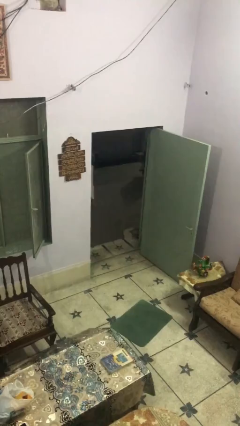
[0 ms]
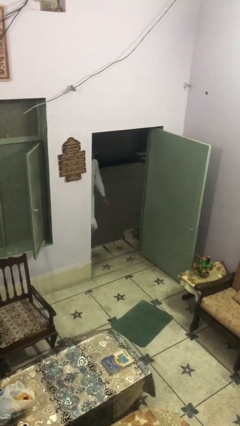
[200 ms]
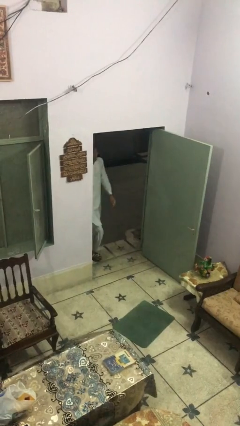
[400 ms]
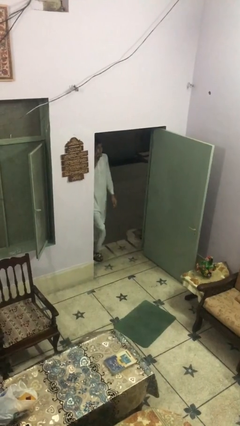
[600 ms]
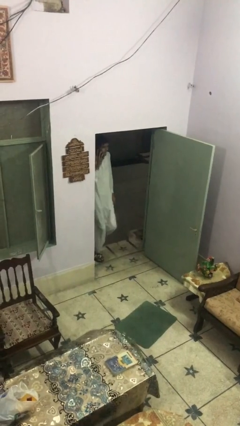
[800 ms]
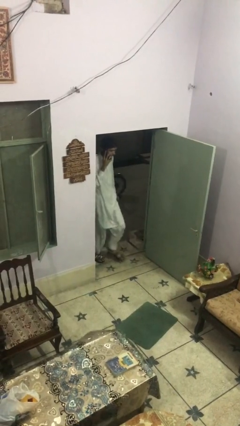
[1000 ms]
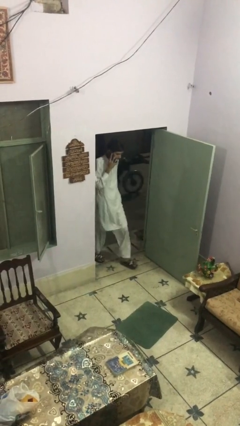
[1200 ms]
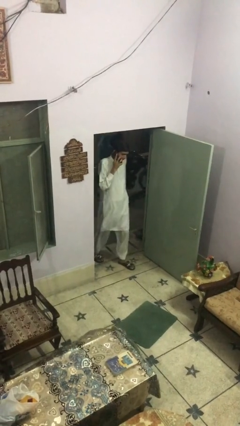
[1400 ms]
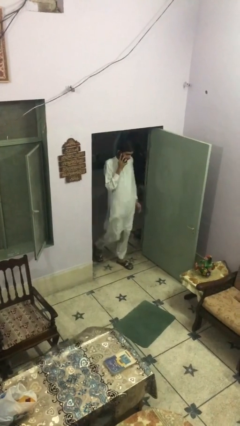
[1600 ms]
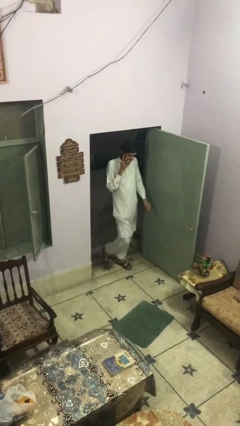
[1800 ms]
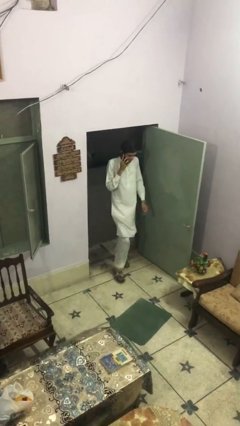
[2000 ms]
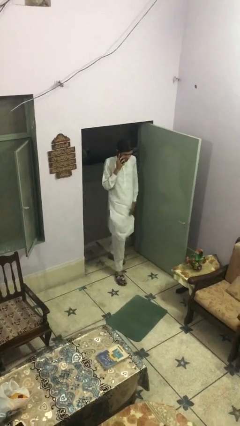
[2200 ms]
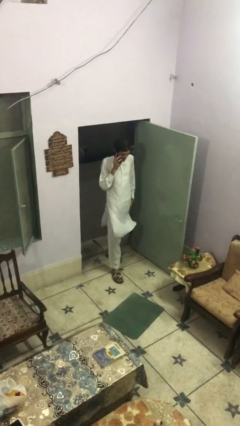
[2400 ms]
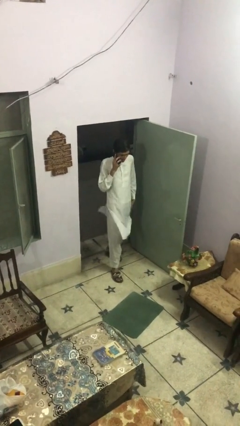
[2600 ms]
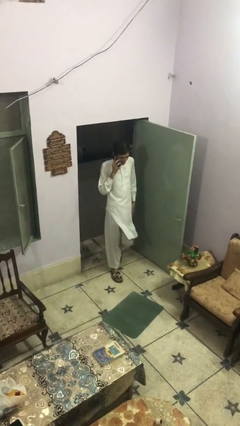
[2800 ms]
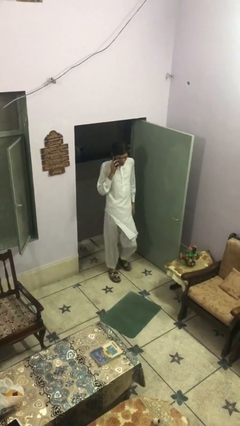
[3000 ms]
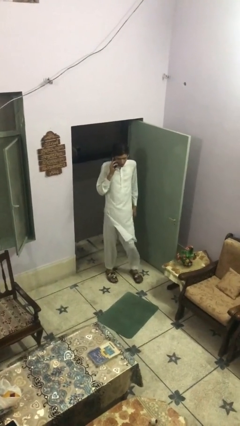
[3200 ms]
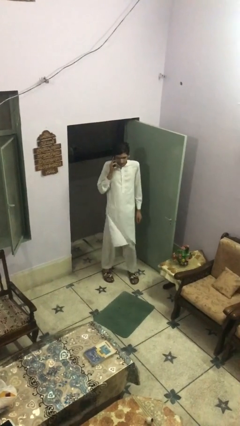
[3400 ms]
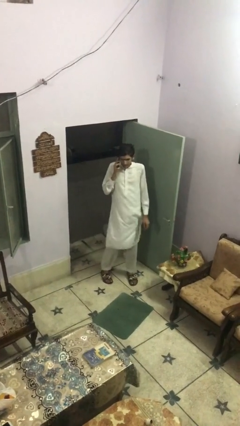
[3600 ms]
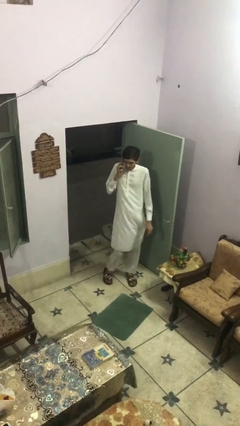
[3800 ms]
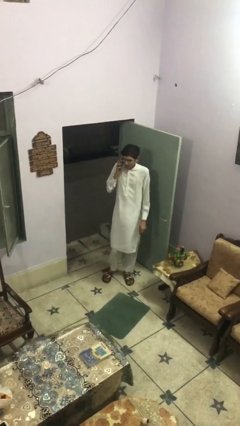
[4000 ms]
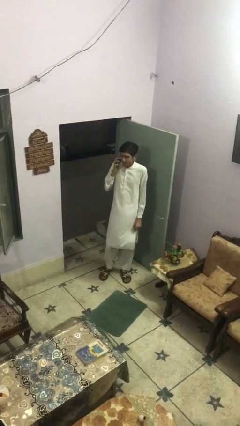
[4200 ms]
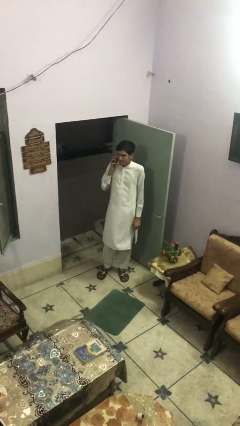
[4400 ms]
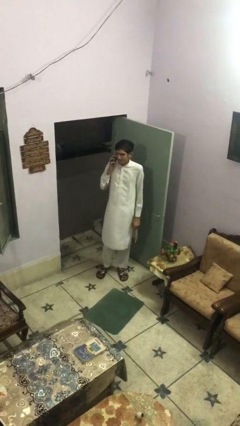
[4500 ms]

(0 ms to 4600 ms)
person enters scene through structure

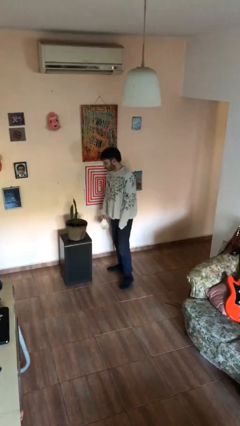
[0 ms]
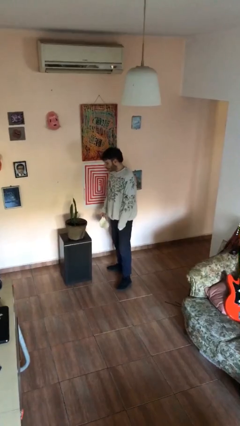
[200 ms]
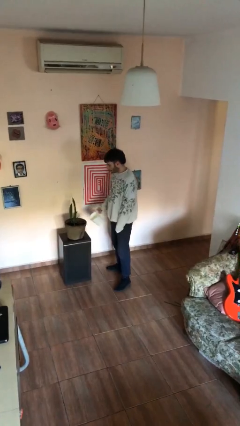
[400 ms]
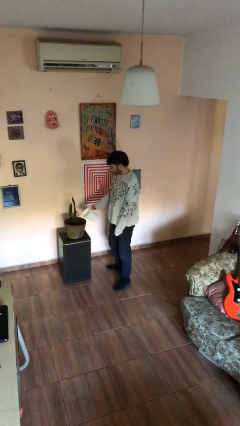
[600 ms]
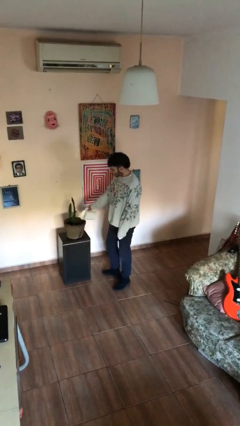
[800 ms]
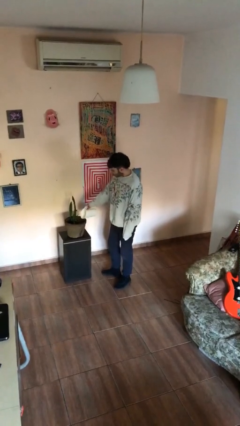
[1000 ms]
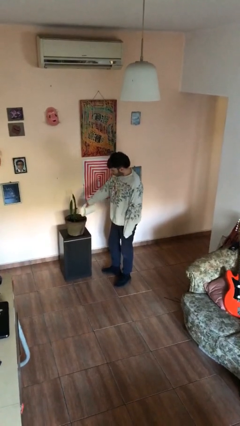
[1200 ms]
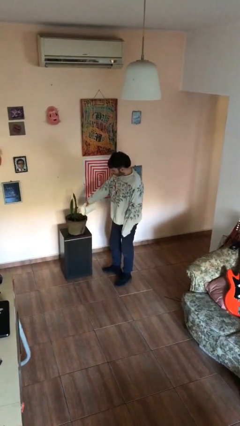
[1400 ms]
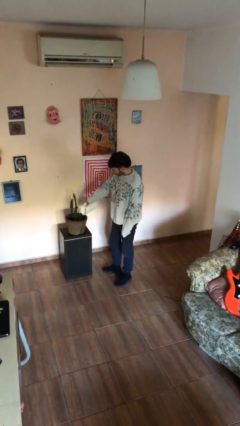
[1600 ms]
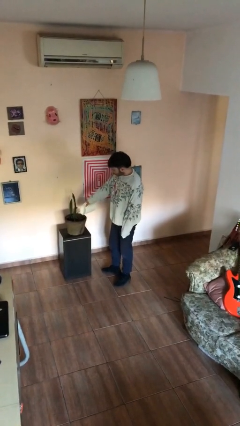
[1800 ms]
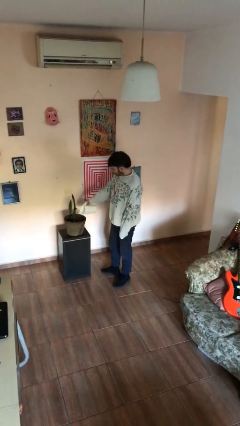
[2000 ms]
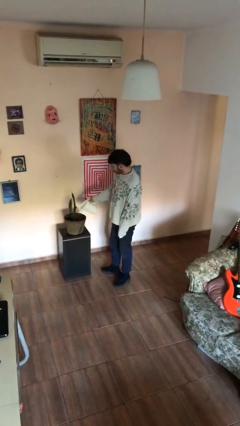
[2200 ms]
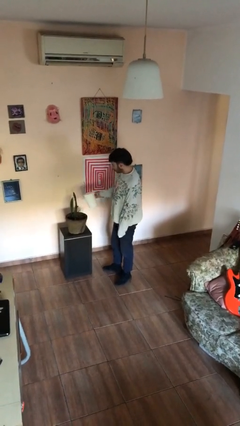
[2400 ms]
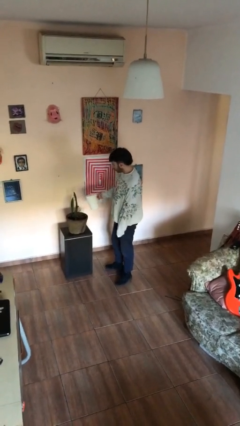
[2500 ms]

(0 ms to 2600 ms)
person waters houseplant

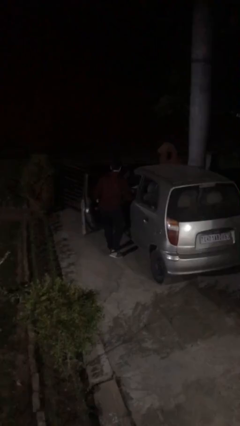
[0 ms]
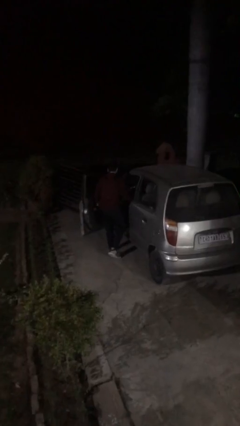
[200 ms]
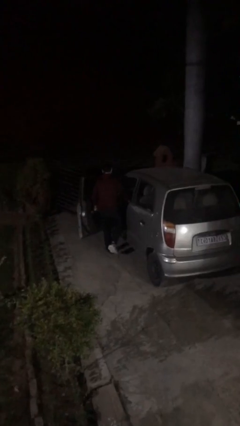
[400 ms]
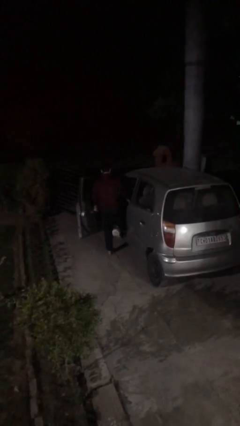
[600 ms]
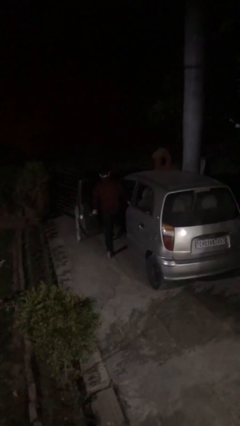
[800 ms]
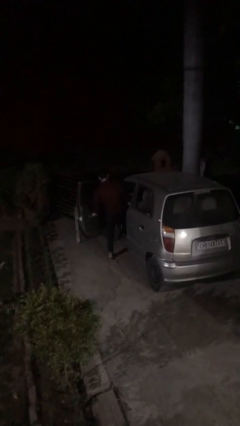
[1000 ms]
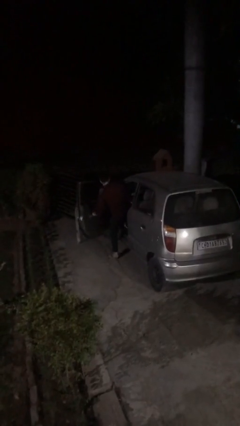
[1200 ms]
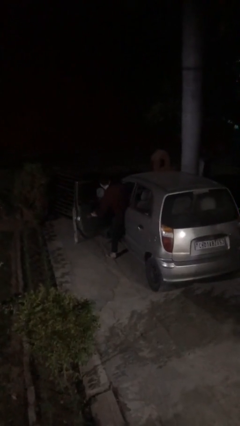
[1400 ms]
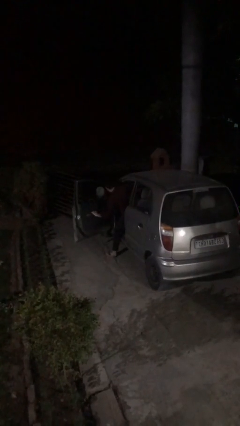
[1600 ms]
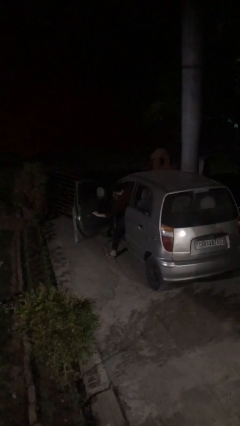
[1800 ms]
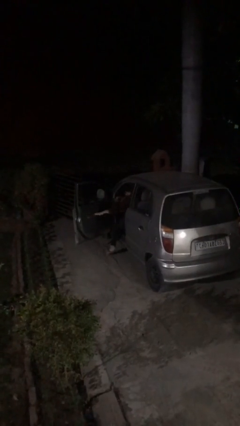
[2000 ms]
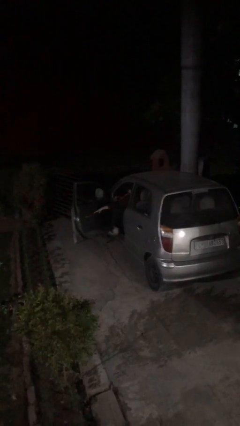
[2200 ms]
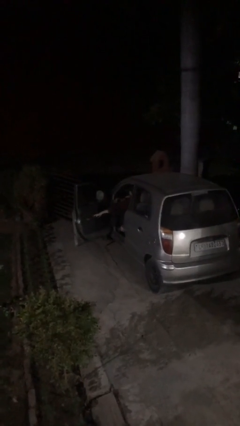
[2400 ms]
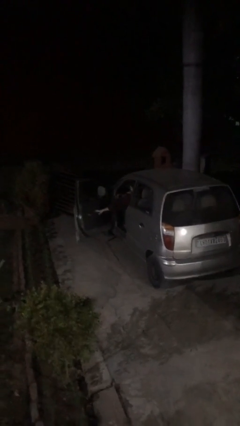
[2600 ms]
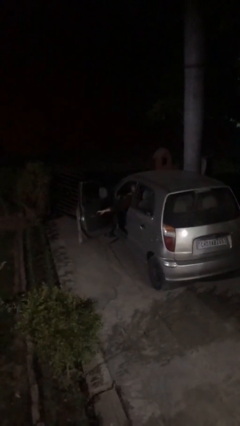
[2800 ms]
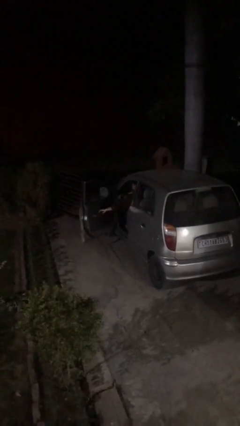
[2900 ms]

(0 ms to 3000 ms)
person enters car

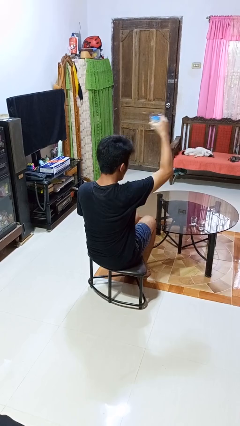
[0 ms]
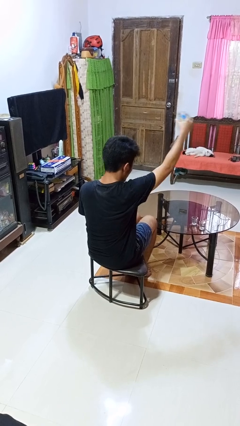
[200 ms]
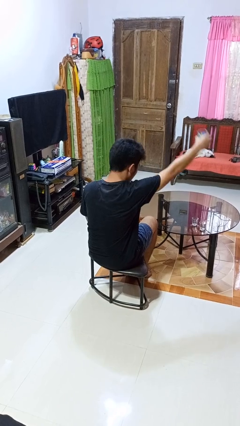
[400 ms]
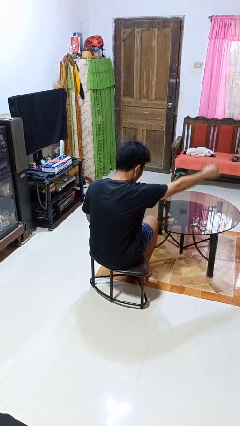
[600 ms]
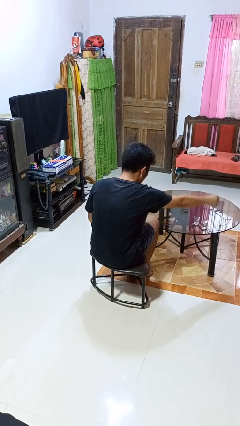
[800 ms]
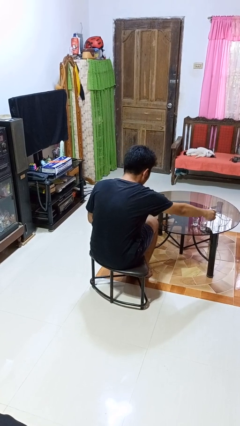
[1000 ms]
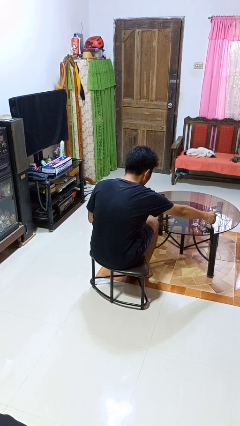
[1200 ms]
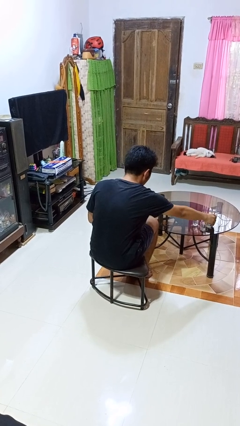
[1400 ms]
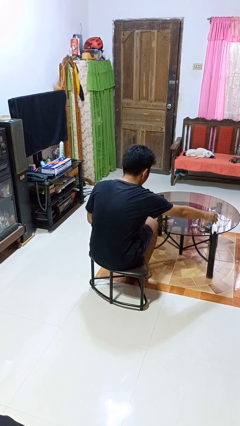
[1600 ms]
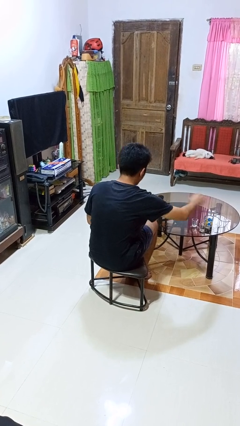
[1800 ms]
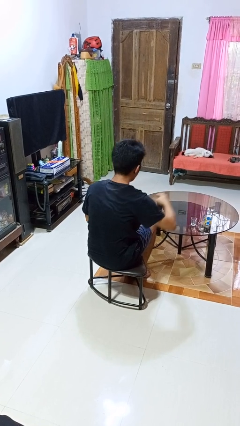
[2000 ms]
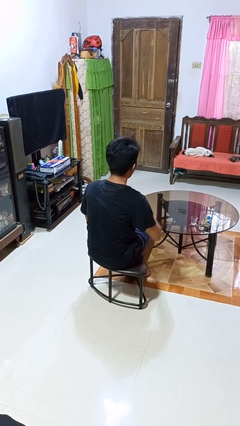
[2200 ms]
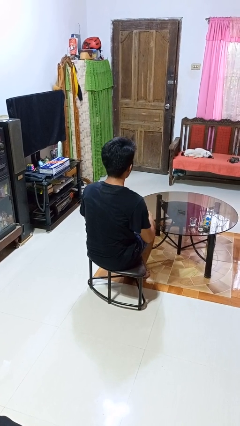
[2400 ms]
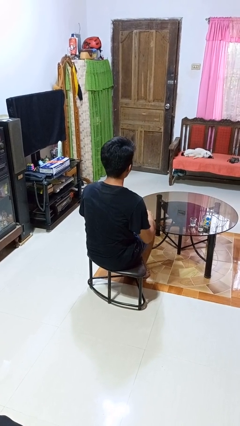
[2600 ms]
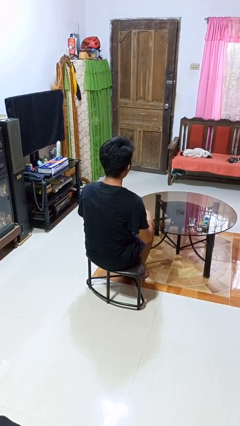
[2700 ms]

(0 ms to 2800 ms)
person puts down object on table

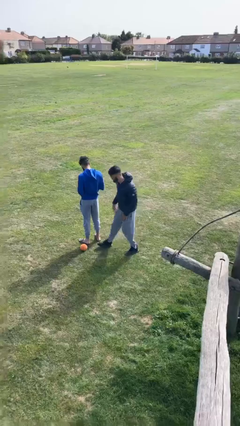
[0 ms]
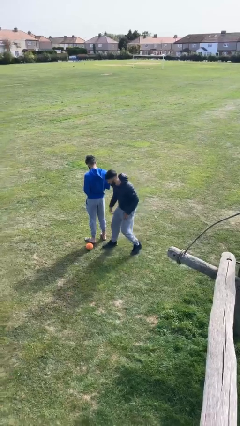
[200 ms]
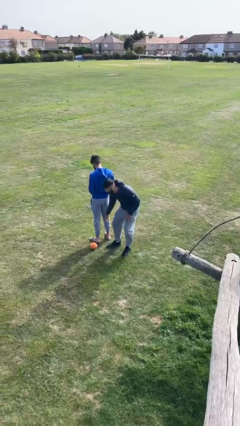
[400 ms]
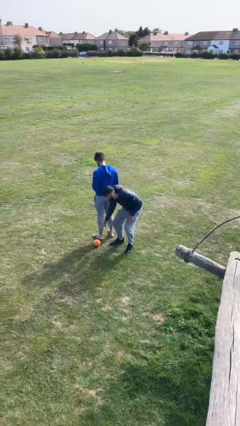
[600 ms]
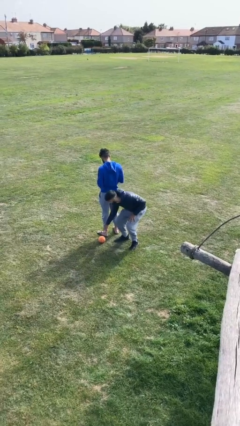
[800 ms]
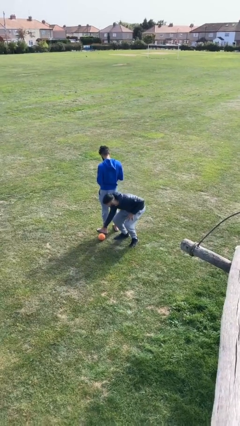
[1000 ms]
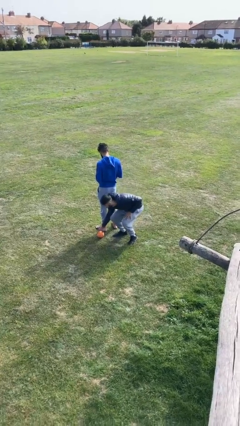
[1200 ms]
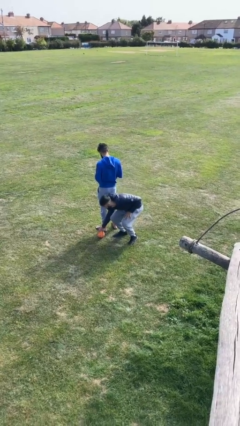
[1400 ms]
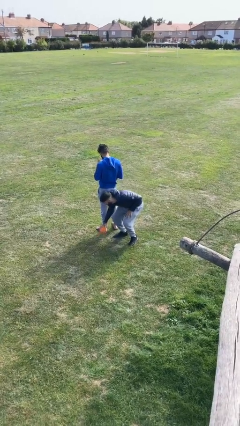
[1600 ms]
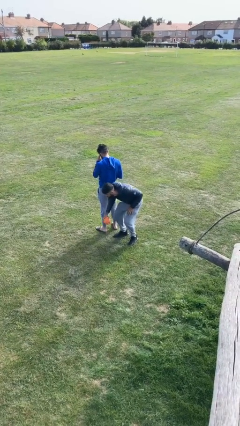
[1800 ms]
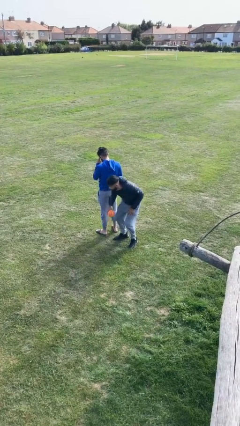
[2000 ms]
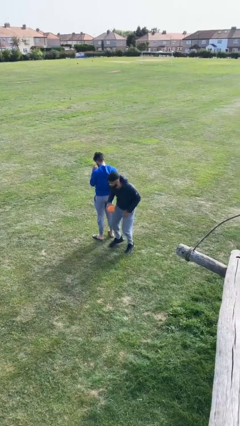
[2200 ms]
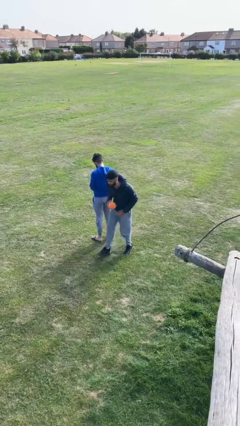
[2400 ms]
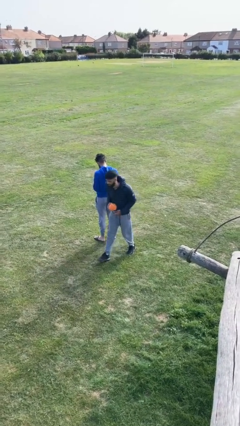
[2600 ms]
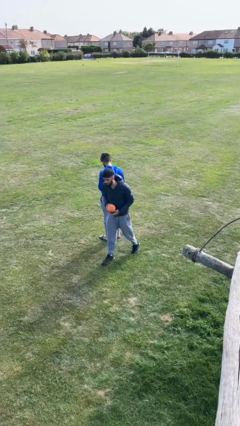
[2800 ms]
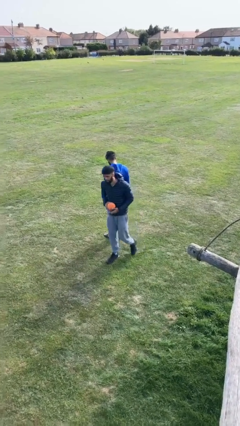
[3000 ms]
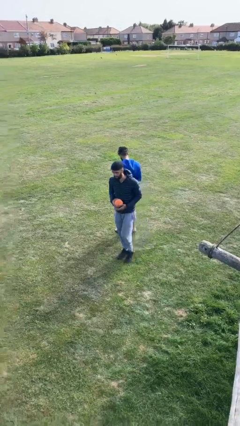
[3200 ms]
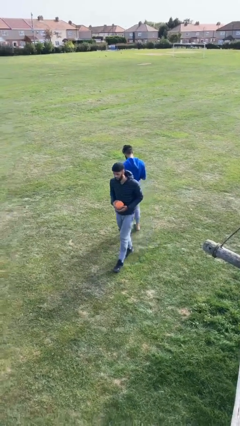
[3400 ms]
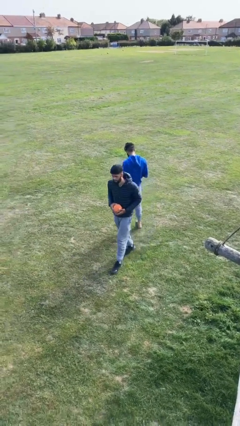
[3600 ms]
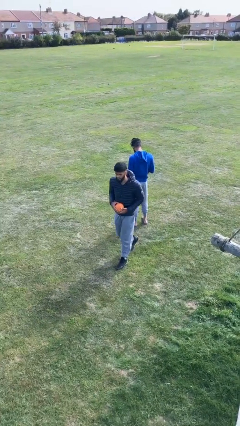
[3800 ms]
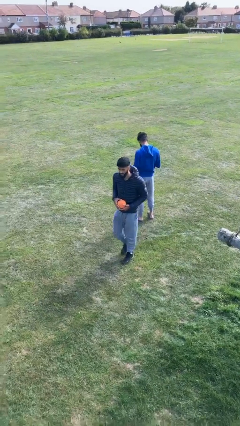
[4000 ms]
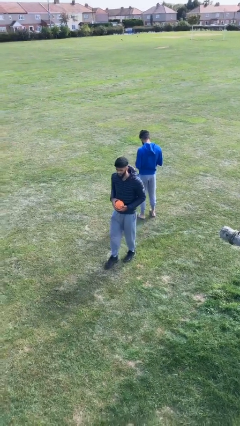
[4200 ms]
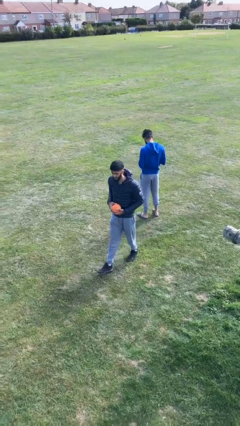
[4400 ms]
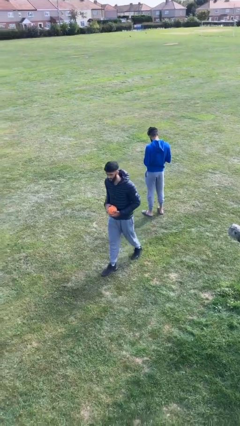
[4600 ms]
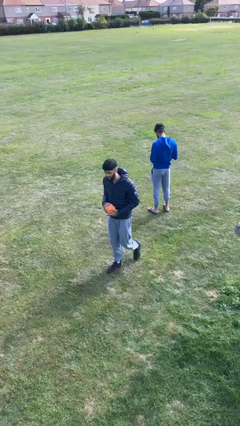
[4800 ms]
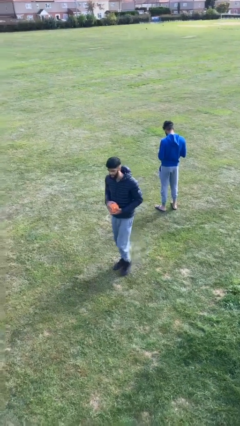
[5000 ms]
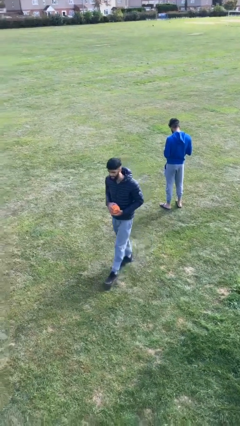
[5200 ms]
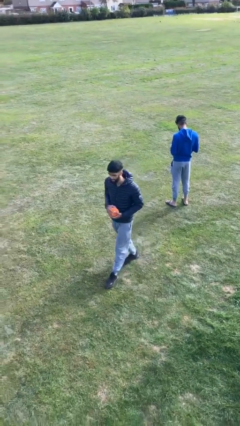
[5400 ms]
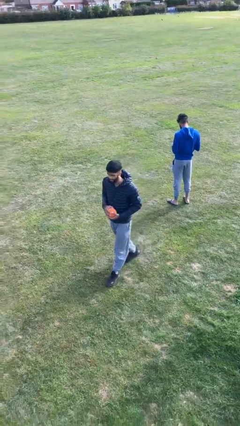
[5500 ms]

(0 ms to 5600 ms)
person steals object from person
